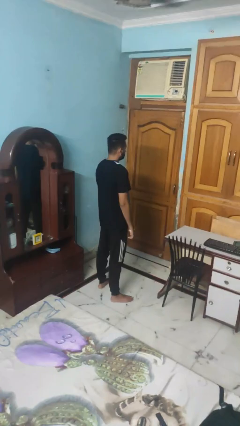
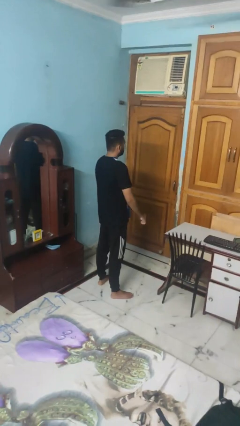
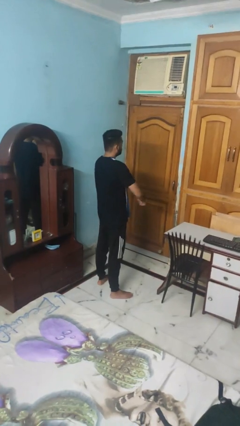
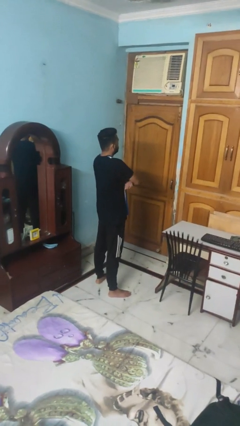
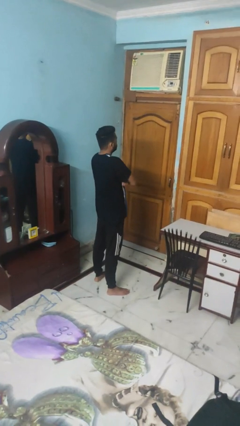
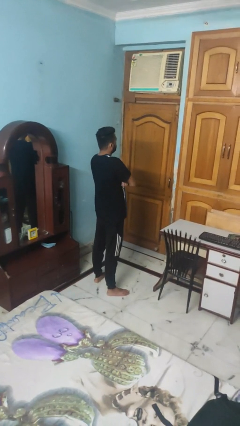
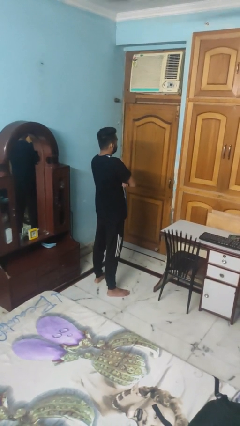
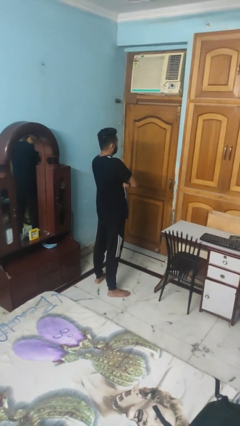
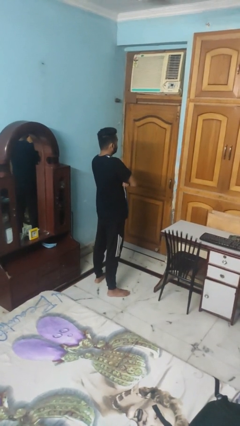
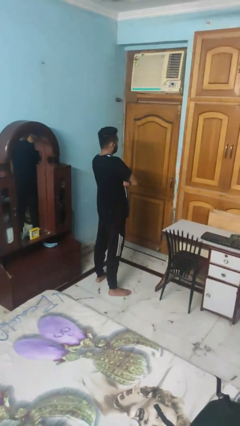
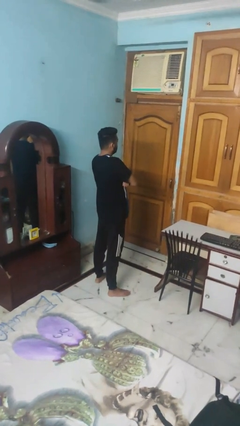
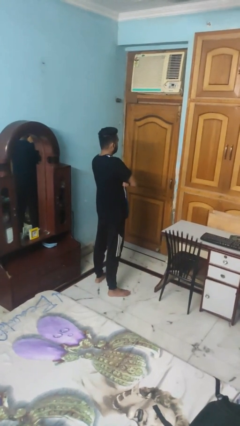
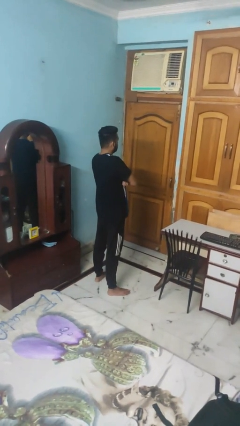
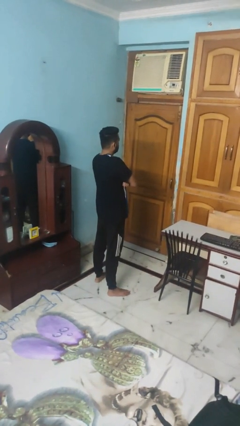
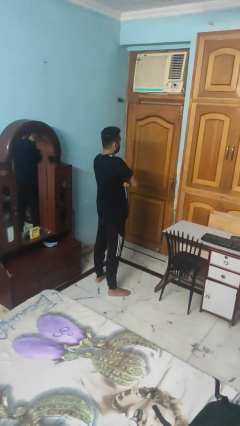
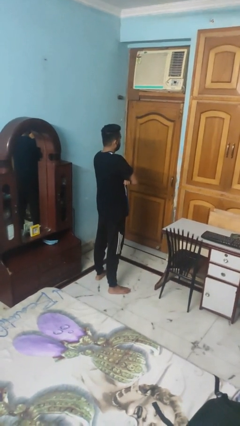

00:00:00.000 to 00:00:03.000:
person crosses arms

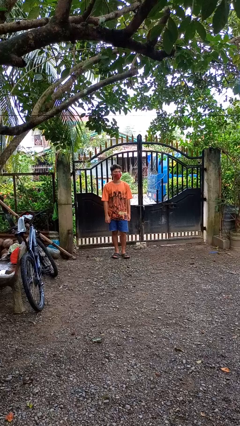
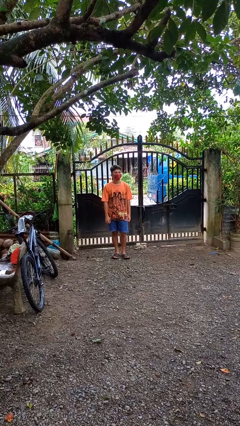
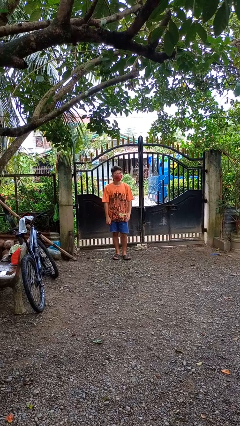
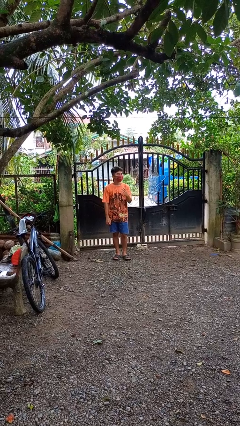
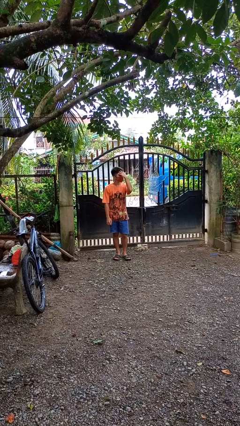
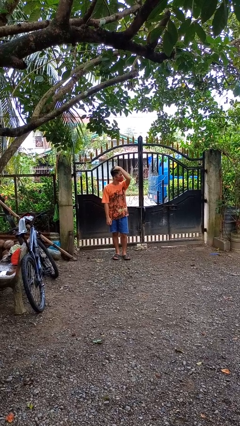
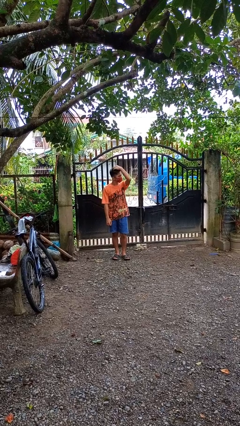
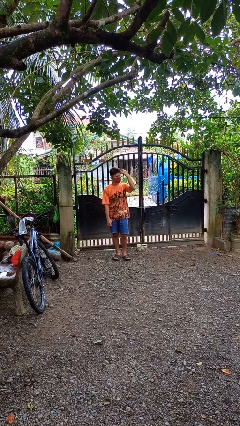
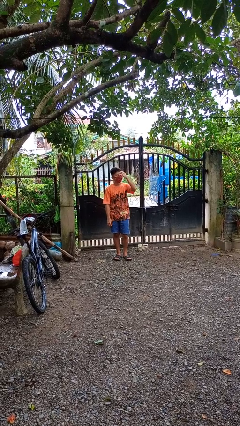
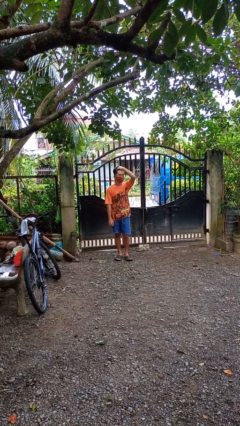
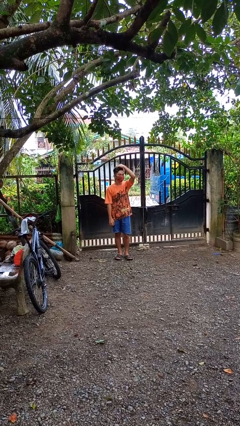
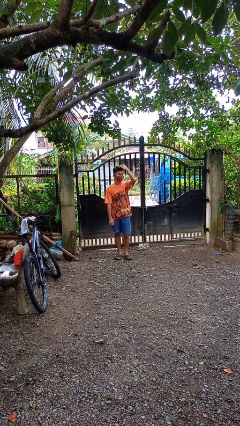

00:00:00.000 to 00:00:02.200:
person strokes hair

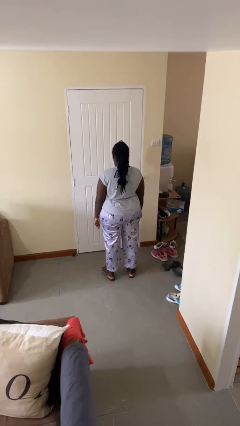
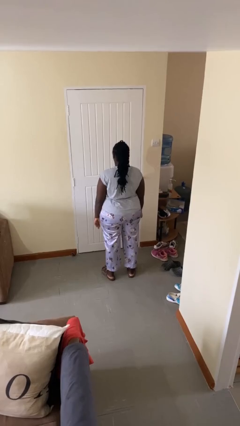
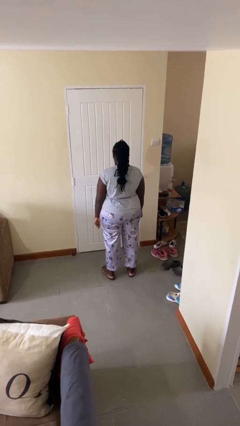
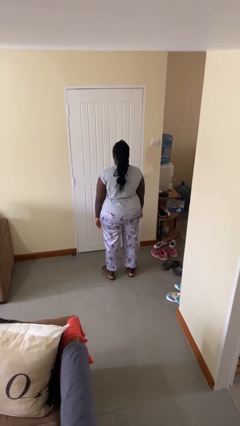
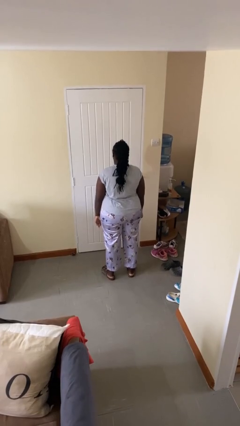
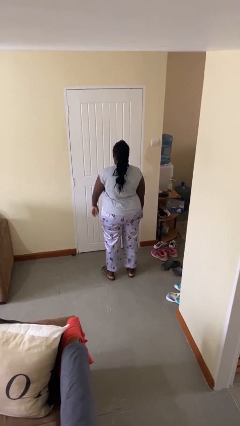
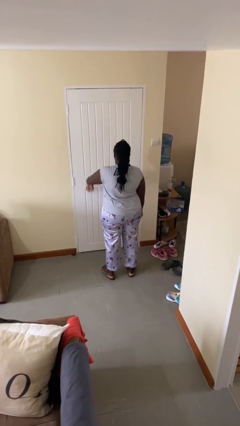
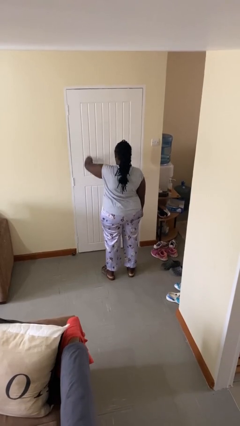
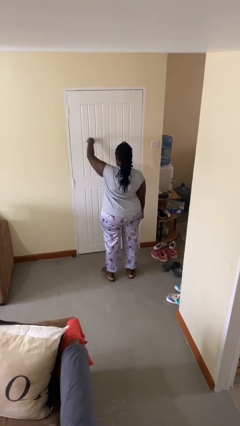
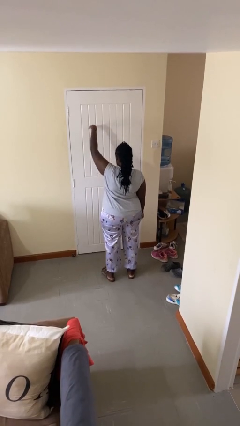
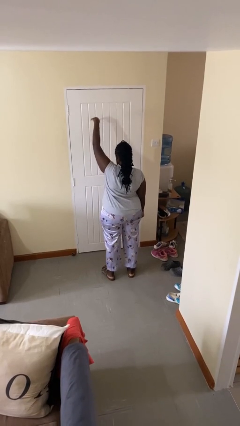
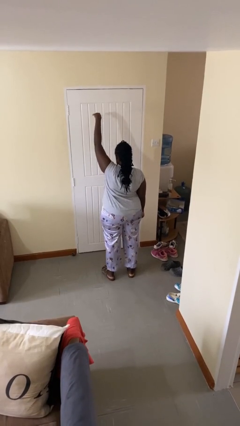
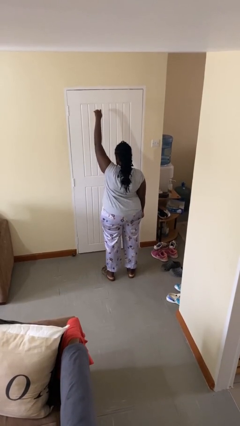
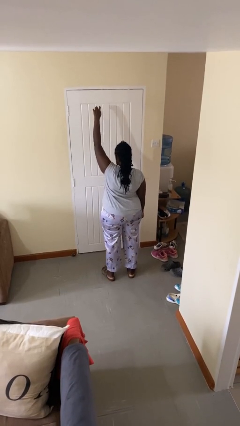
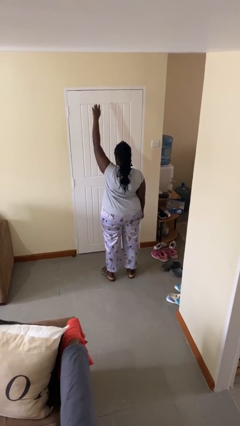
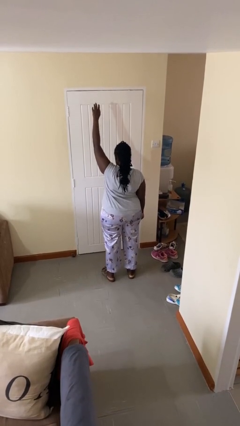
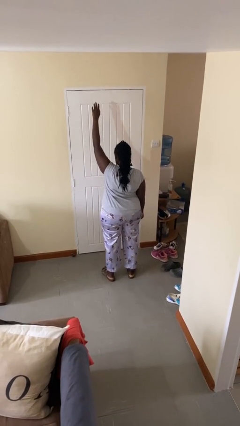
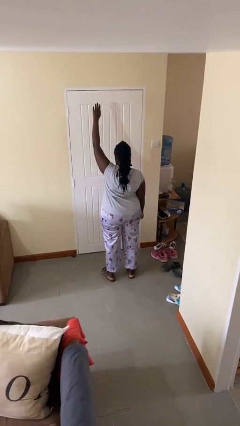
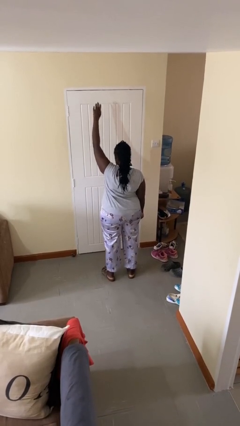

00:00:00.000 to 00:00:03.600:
person gestures swipe up

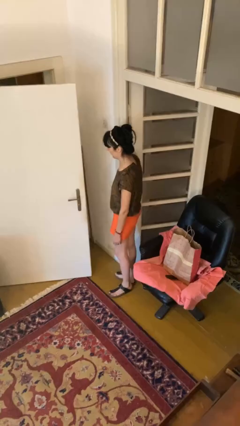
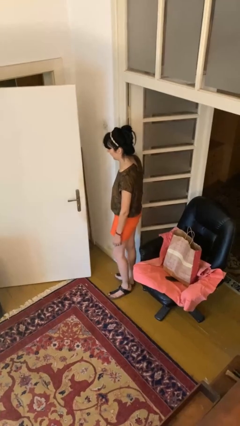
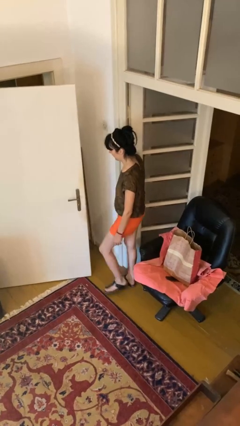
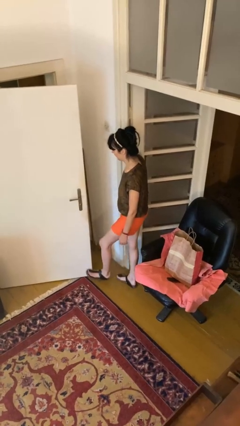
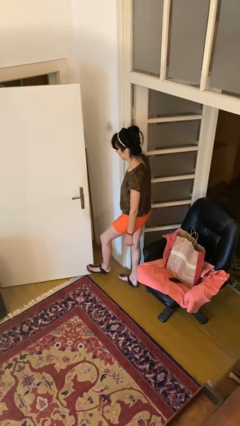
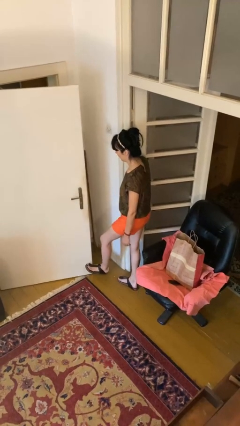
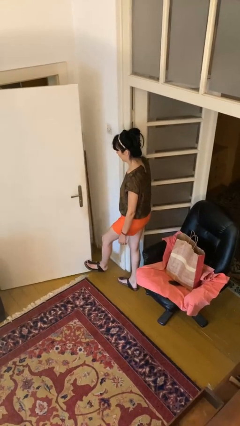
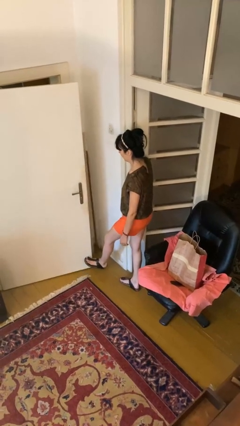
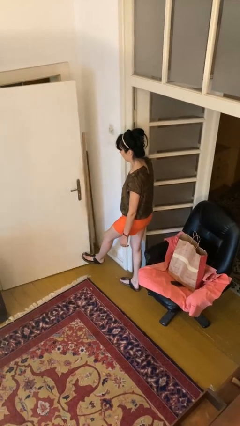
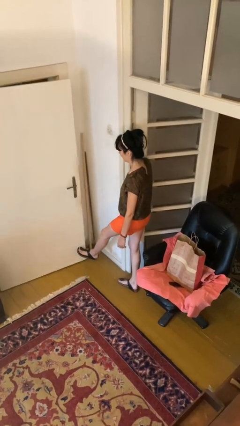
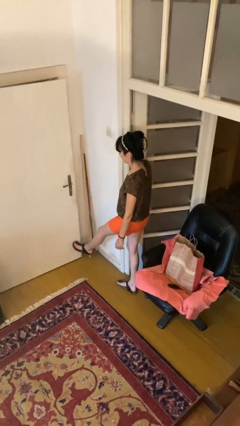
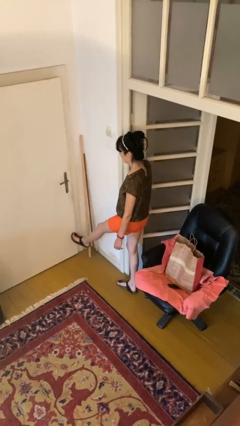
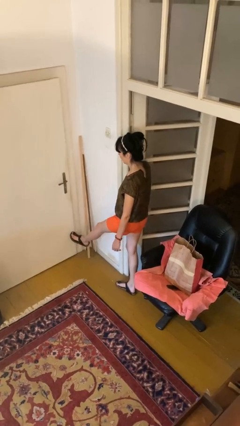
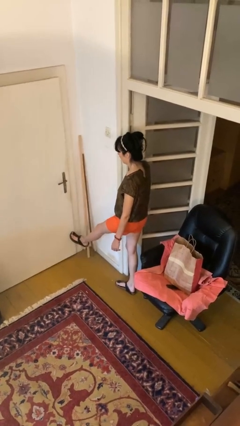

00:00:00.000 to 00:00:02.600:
person closes door with foot

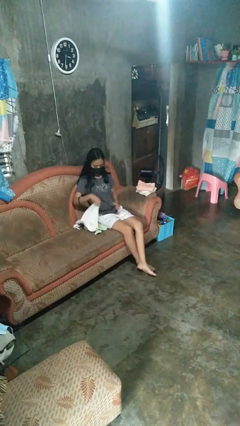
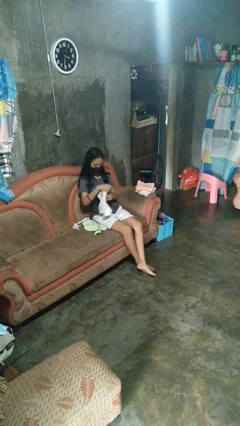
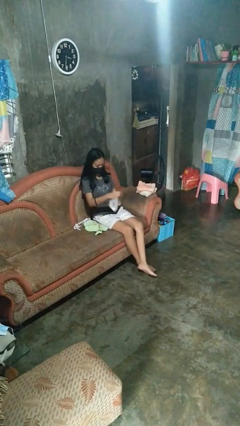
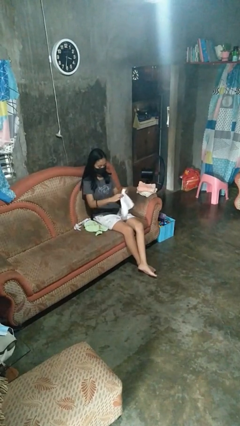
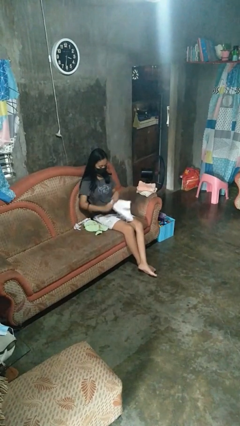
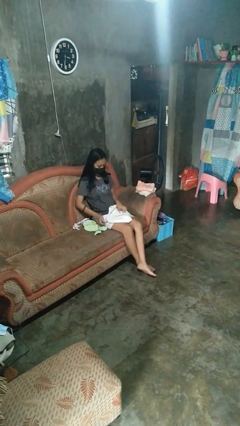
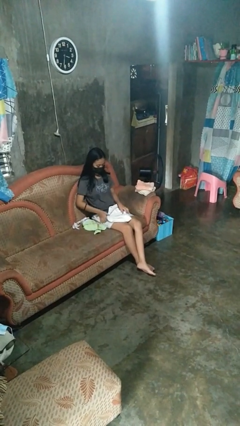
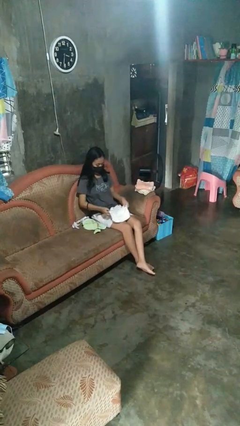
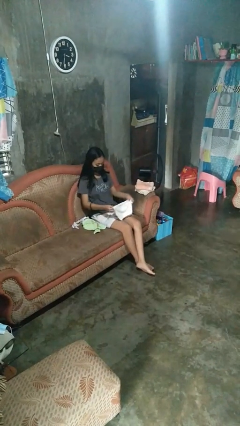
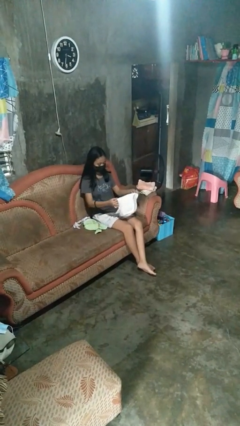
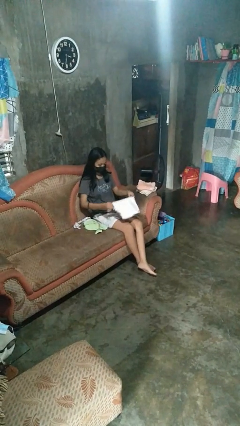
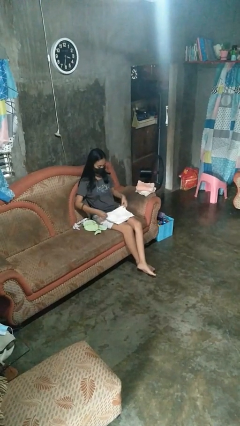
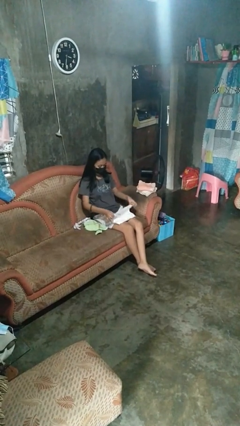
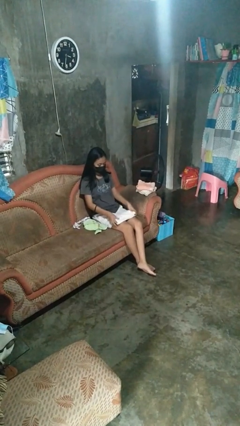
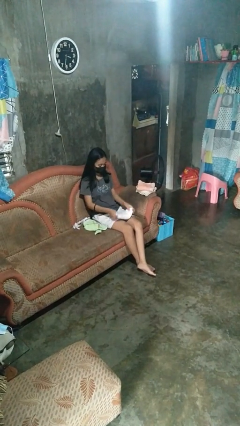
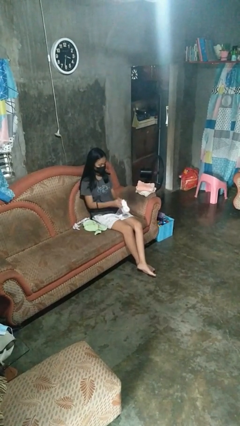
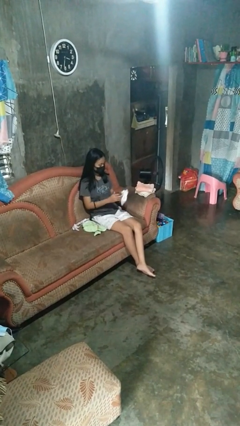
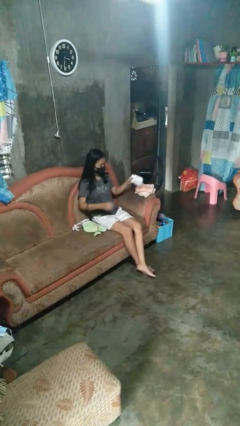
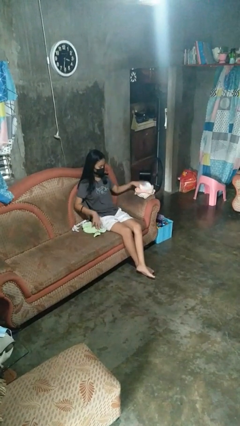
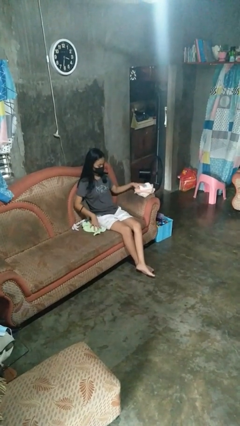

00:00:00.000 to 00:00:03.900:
person folds towel

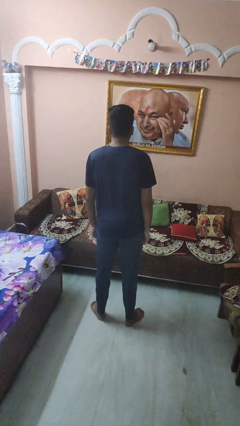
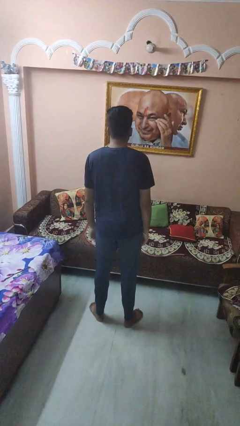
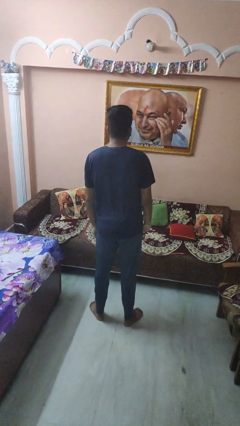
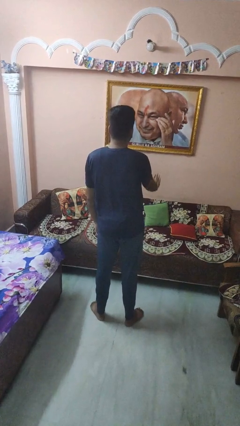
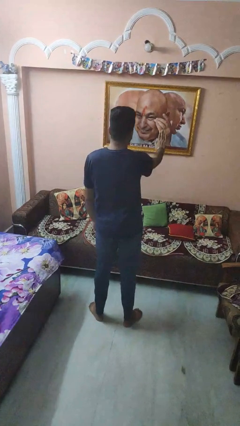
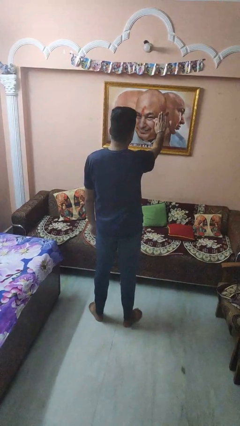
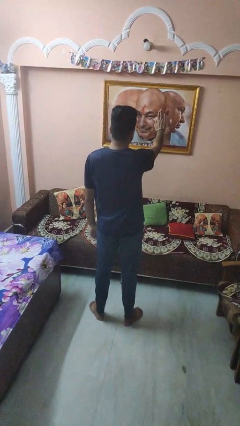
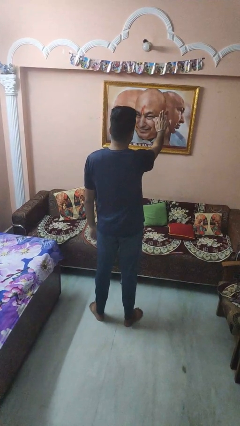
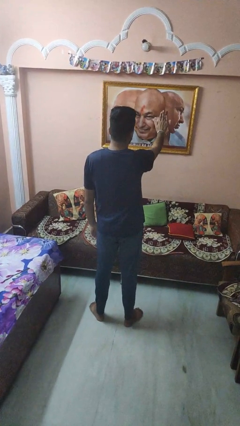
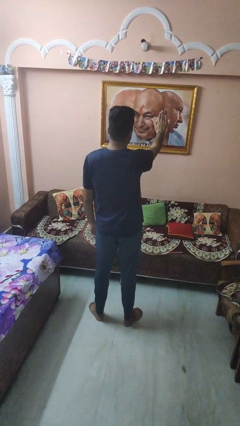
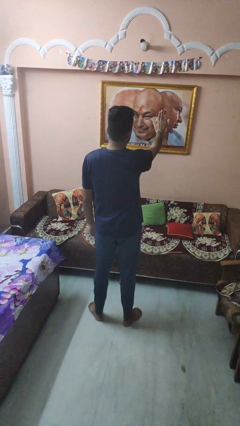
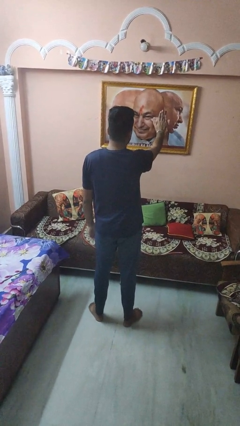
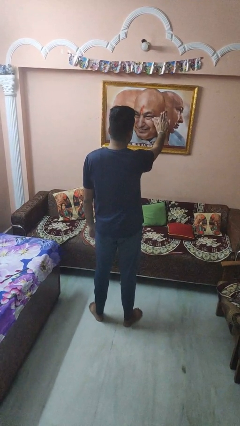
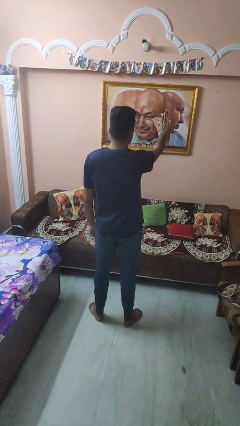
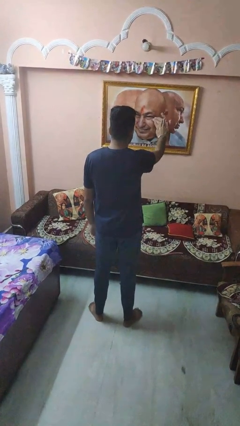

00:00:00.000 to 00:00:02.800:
person gestures stop
